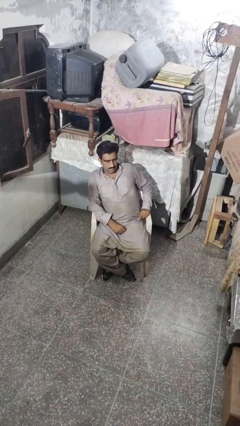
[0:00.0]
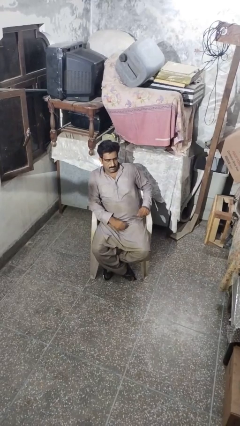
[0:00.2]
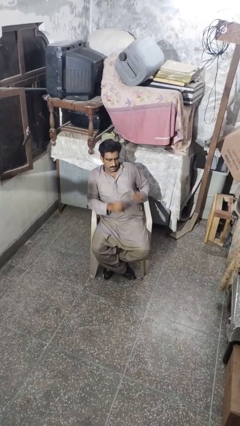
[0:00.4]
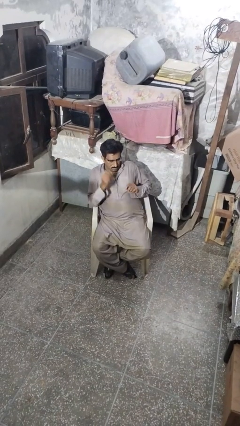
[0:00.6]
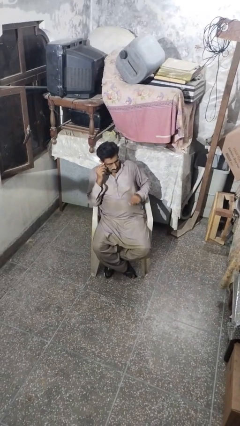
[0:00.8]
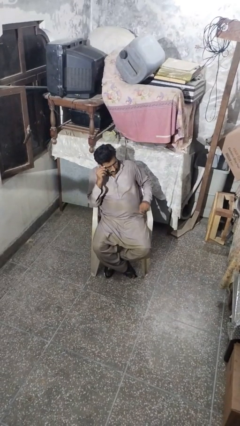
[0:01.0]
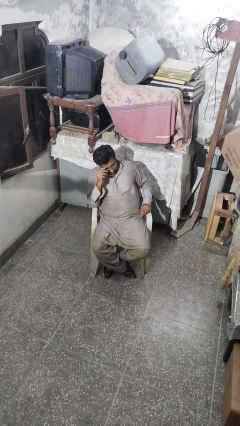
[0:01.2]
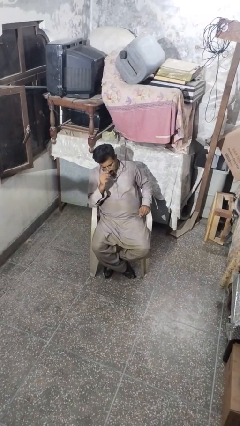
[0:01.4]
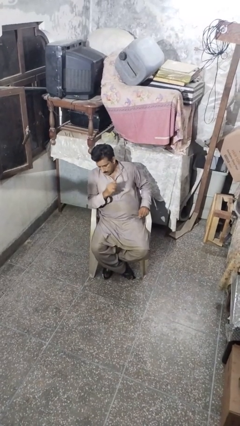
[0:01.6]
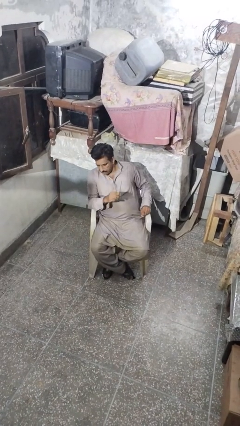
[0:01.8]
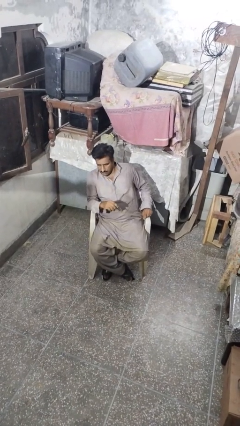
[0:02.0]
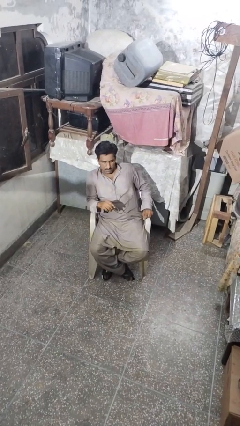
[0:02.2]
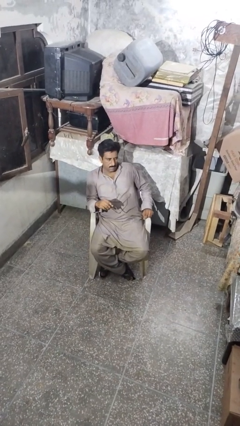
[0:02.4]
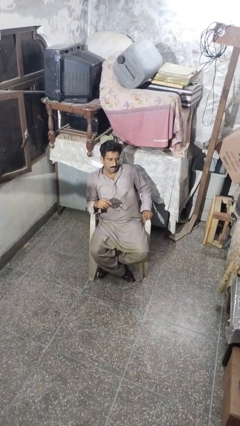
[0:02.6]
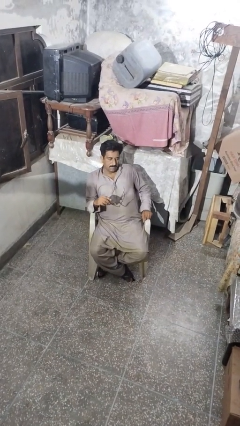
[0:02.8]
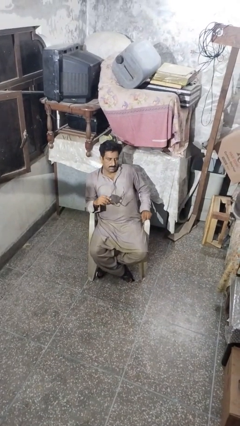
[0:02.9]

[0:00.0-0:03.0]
person takes off glasses

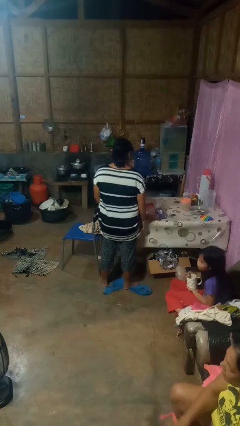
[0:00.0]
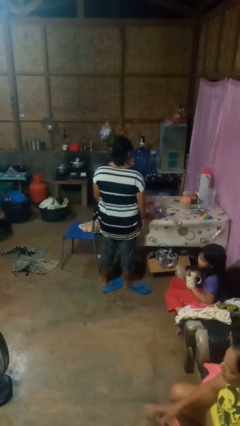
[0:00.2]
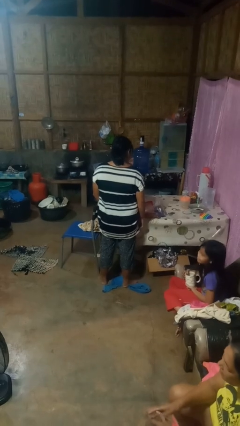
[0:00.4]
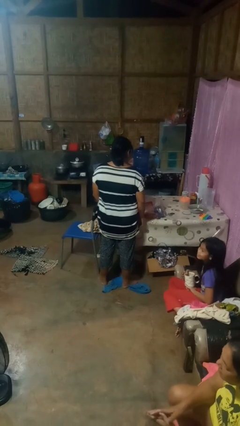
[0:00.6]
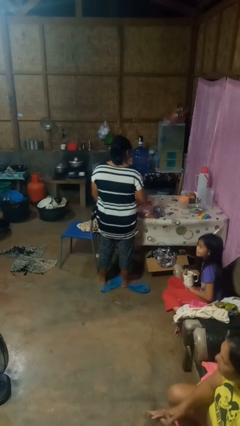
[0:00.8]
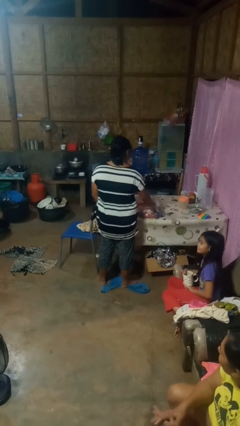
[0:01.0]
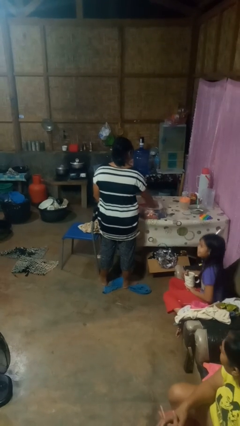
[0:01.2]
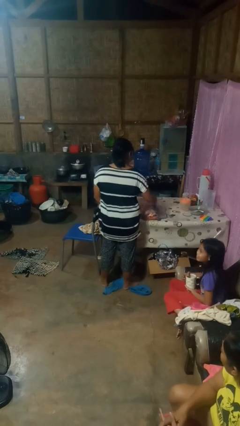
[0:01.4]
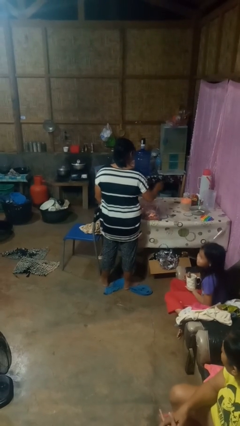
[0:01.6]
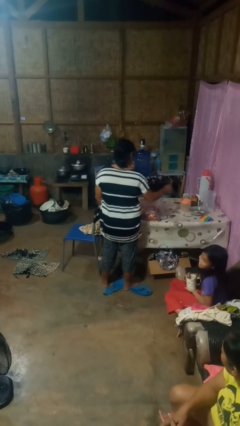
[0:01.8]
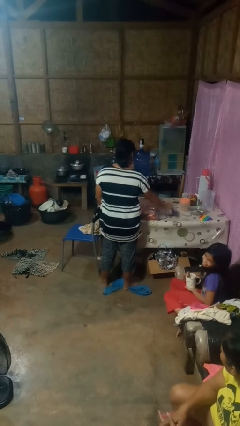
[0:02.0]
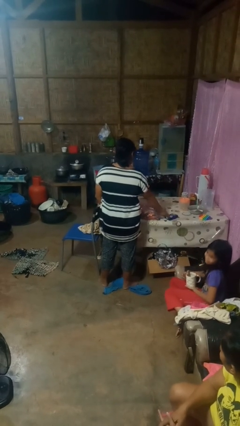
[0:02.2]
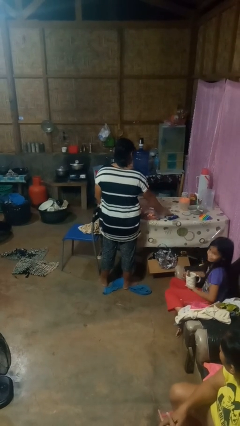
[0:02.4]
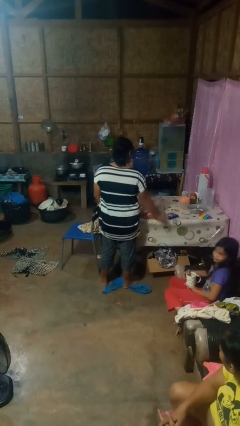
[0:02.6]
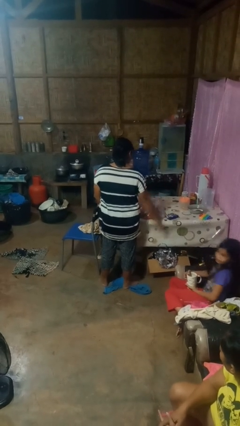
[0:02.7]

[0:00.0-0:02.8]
person takes object from bag

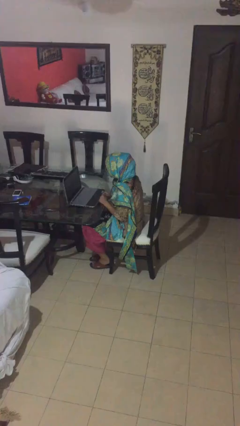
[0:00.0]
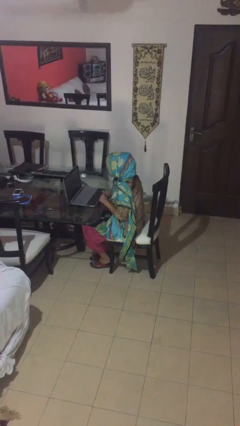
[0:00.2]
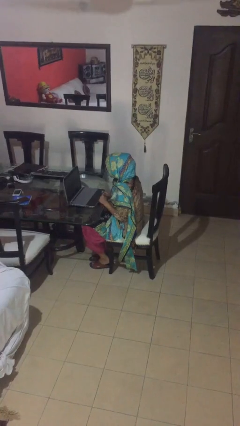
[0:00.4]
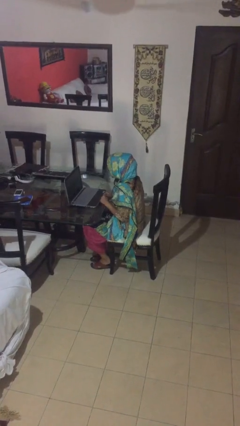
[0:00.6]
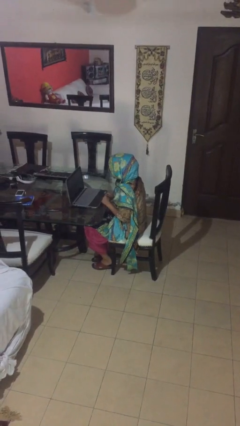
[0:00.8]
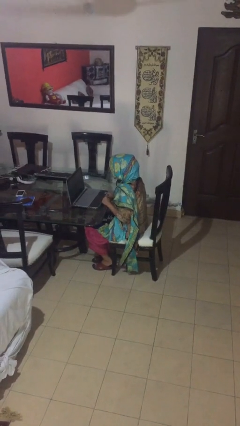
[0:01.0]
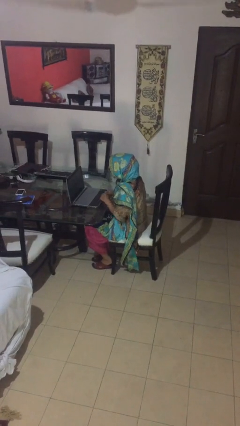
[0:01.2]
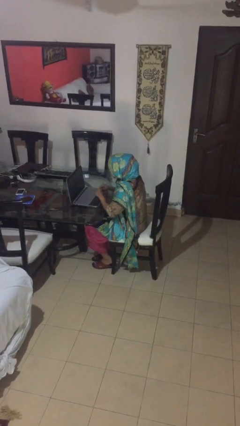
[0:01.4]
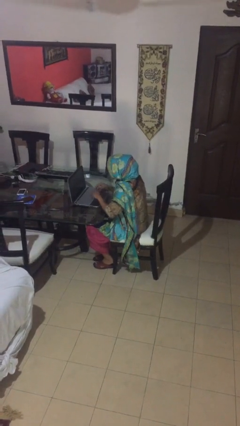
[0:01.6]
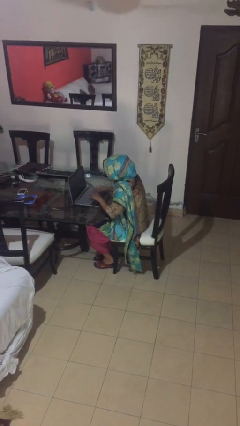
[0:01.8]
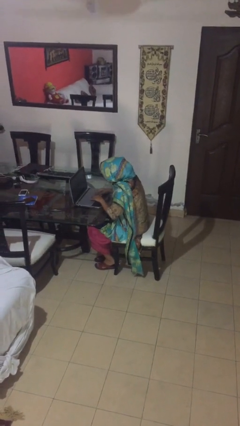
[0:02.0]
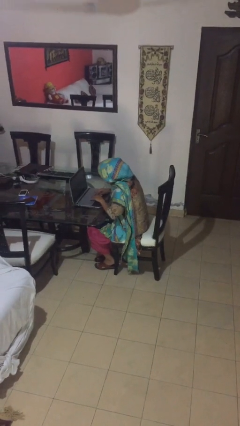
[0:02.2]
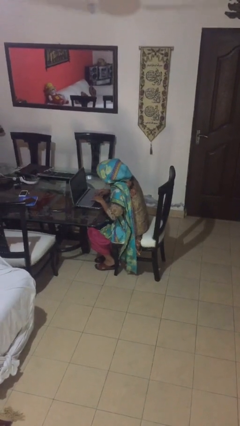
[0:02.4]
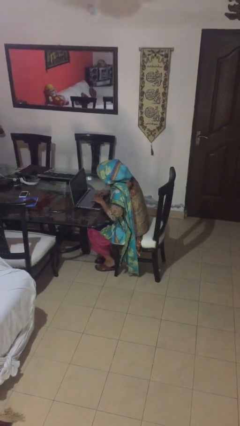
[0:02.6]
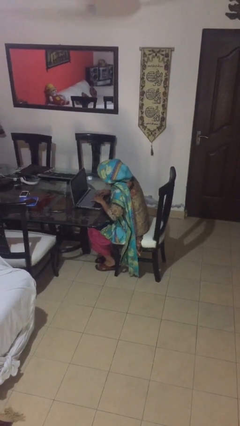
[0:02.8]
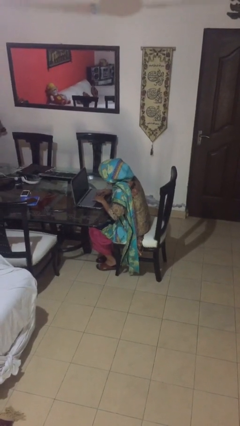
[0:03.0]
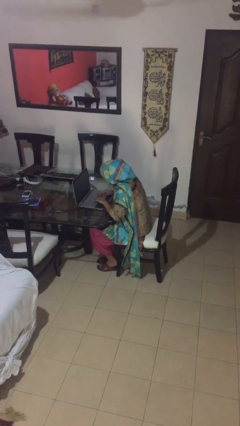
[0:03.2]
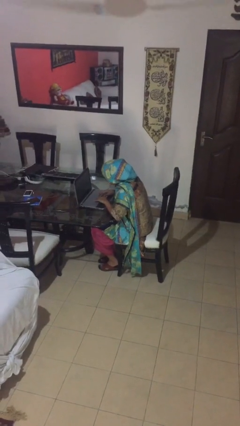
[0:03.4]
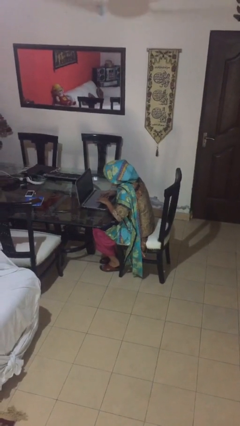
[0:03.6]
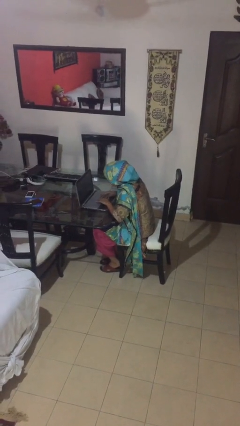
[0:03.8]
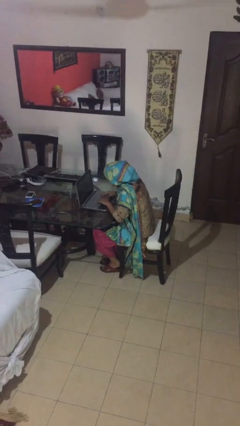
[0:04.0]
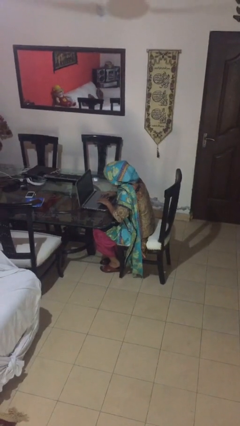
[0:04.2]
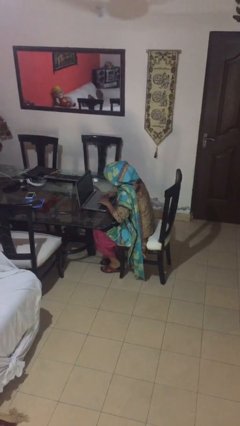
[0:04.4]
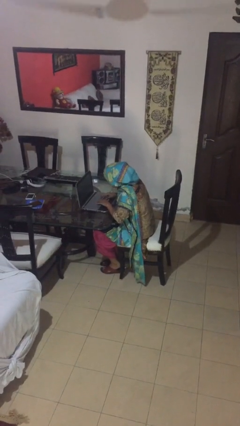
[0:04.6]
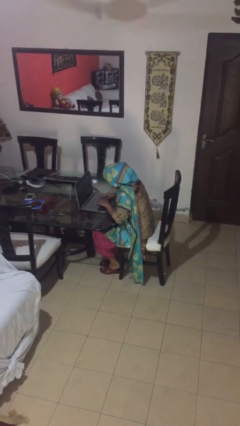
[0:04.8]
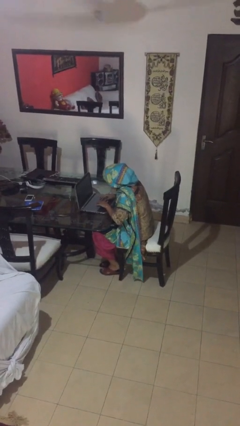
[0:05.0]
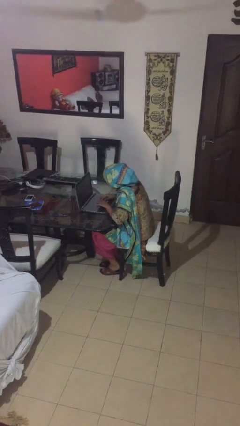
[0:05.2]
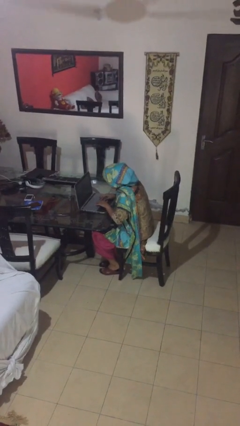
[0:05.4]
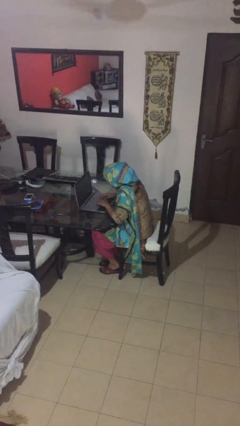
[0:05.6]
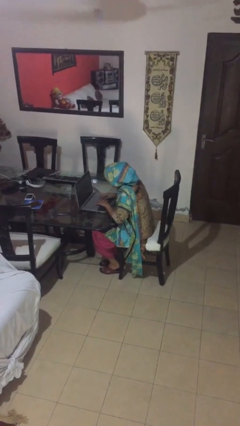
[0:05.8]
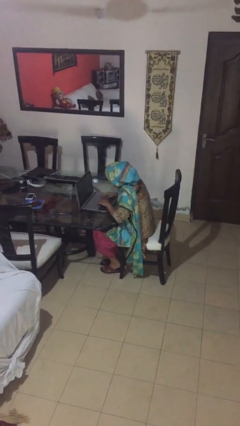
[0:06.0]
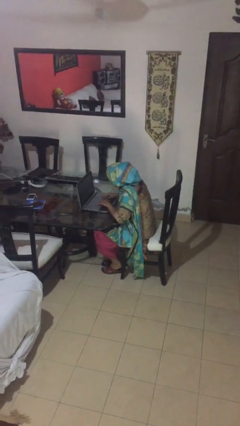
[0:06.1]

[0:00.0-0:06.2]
person interacts with laptop

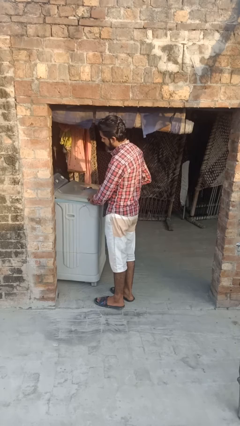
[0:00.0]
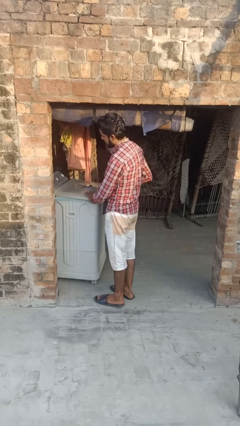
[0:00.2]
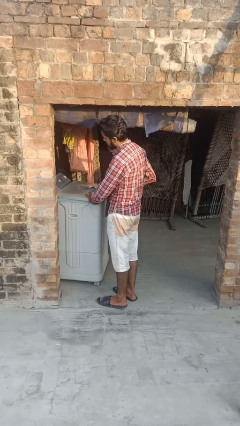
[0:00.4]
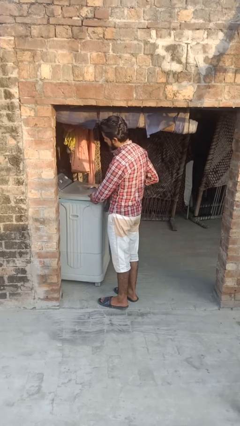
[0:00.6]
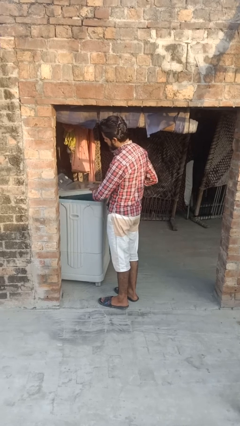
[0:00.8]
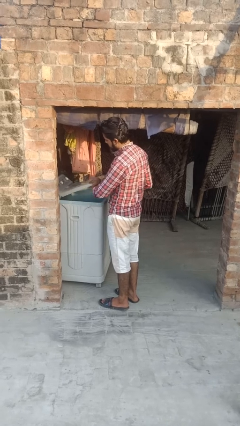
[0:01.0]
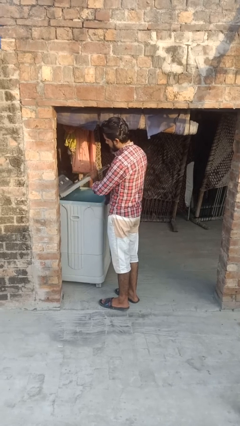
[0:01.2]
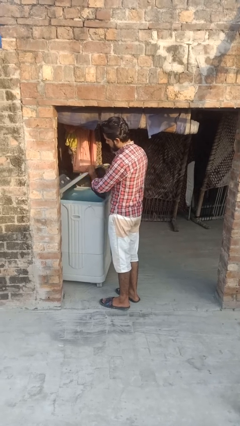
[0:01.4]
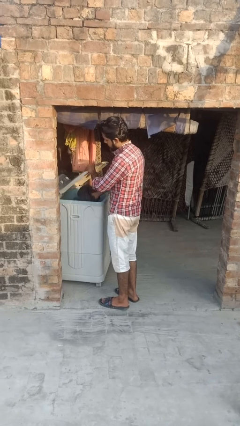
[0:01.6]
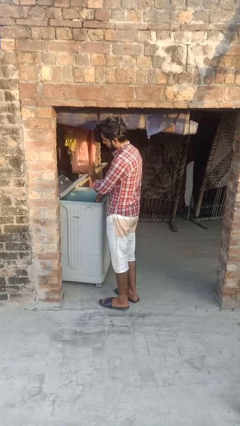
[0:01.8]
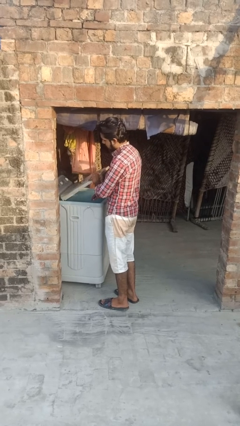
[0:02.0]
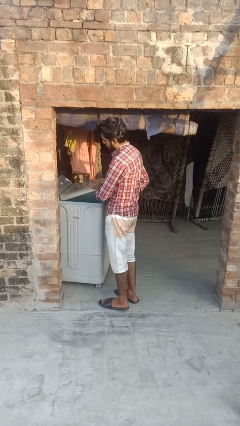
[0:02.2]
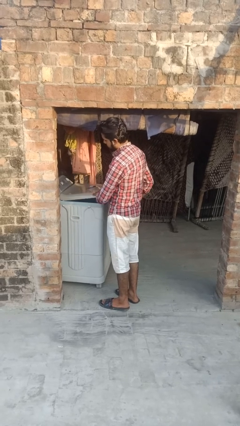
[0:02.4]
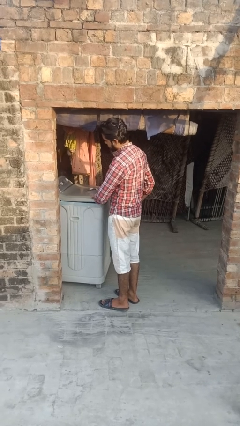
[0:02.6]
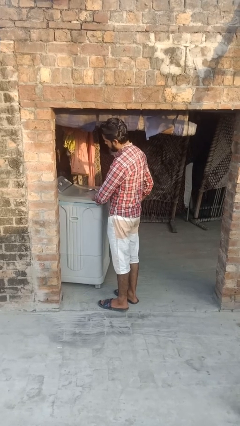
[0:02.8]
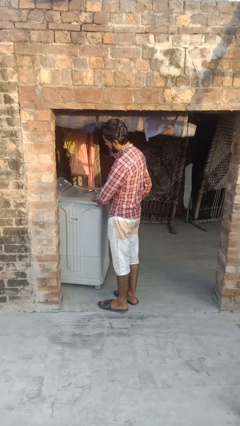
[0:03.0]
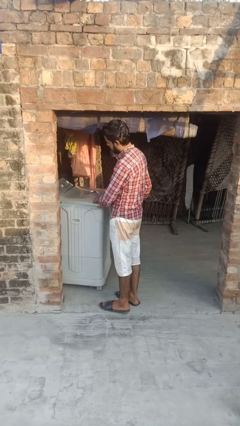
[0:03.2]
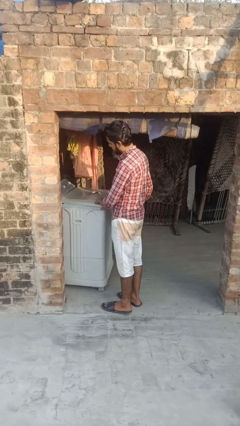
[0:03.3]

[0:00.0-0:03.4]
person loads clotheswasher

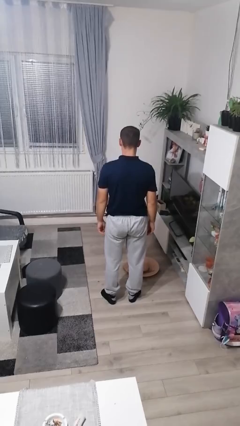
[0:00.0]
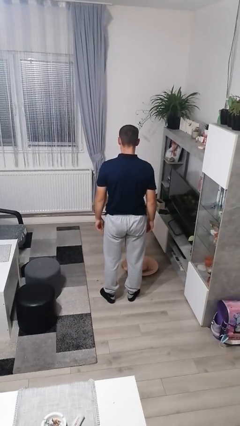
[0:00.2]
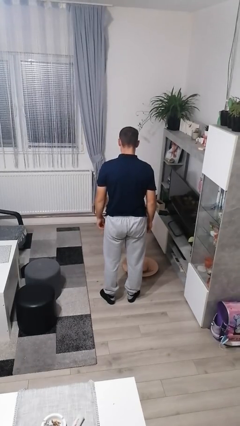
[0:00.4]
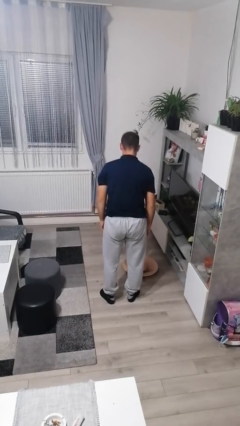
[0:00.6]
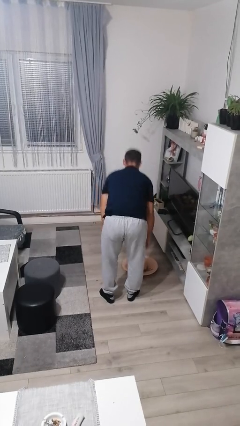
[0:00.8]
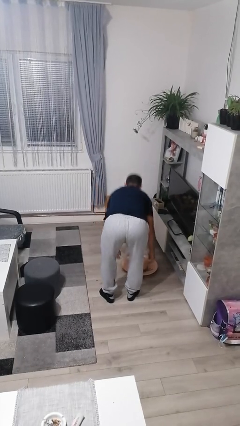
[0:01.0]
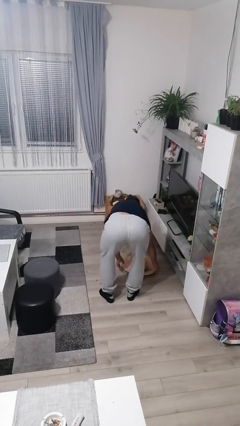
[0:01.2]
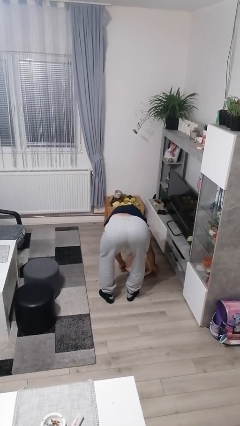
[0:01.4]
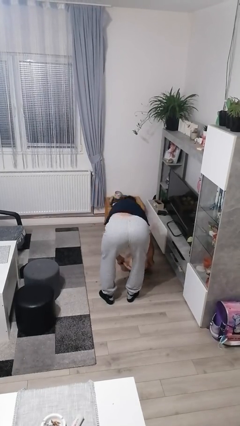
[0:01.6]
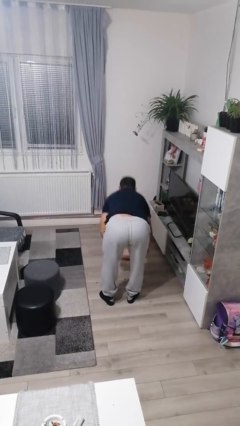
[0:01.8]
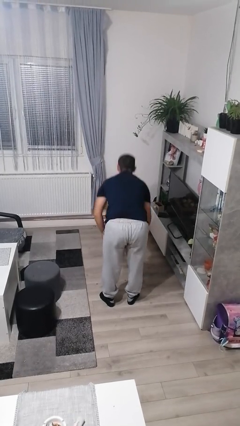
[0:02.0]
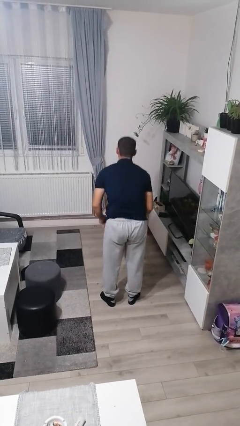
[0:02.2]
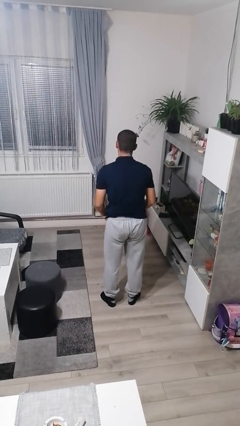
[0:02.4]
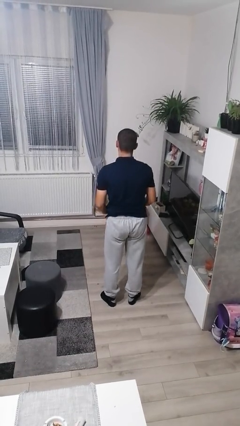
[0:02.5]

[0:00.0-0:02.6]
person picks up object from floor
